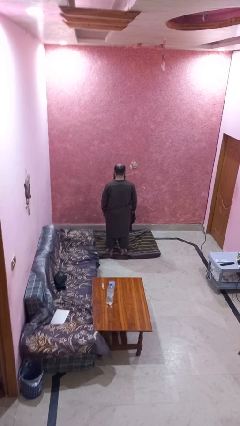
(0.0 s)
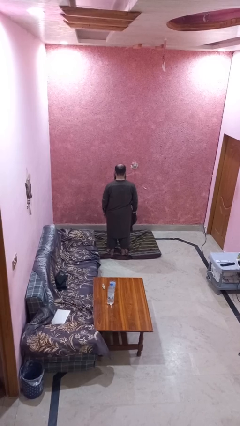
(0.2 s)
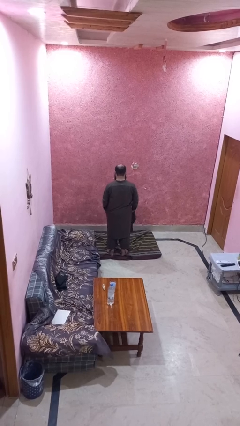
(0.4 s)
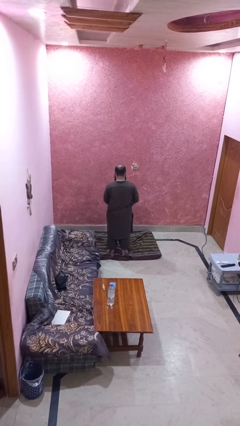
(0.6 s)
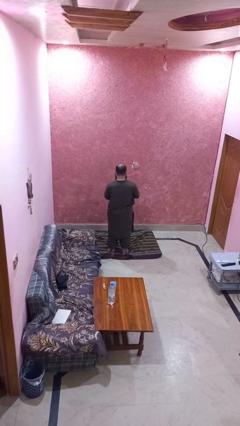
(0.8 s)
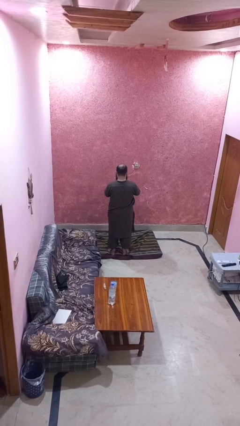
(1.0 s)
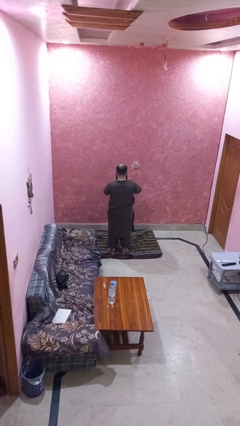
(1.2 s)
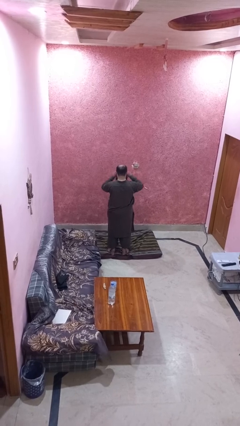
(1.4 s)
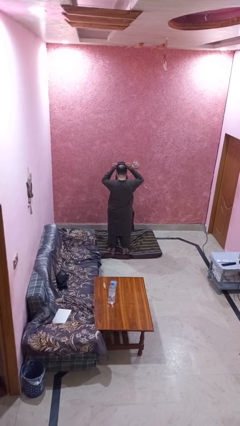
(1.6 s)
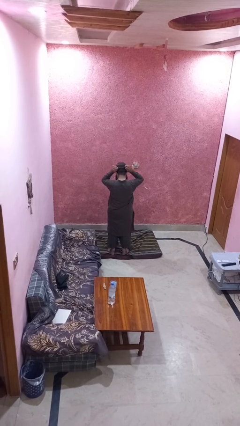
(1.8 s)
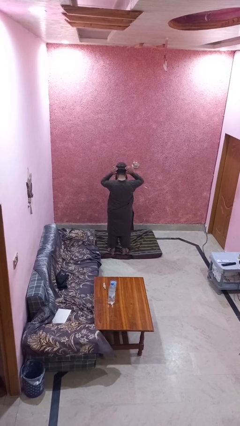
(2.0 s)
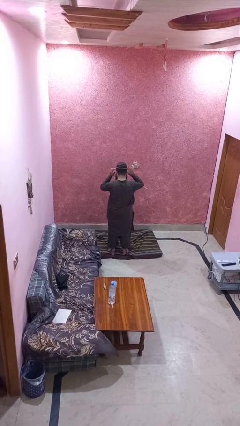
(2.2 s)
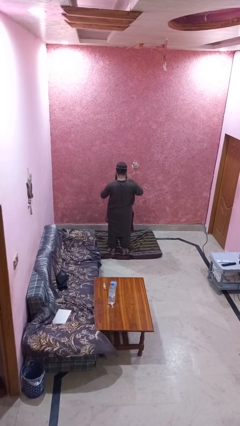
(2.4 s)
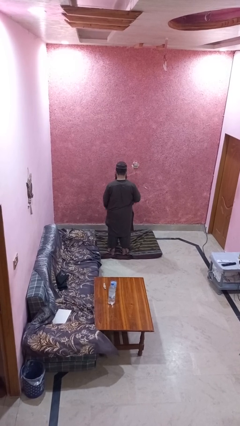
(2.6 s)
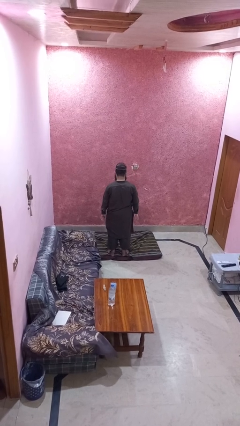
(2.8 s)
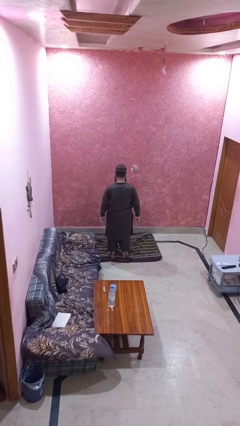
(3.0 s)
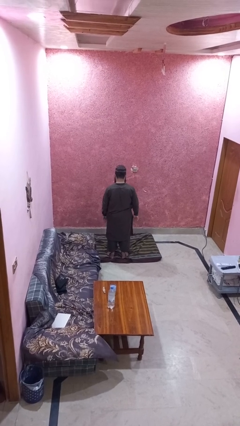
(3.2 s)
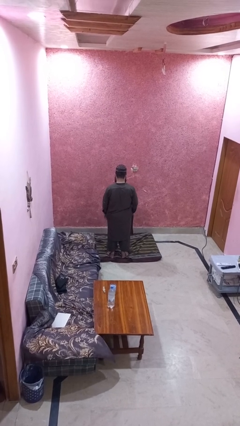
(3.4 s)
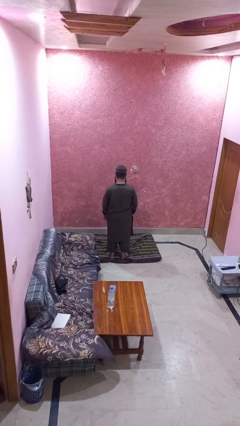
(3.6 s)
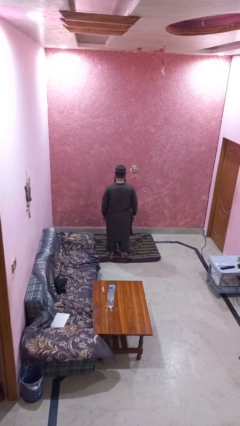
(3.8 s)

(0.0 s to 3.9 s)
person puts on hat

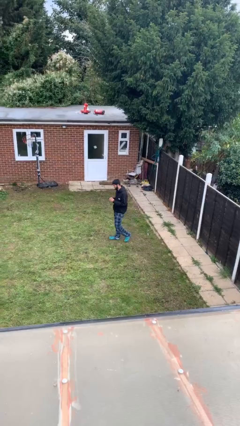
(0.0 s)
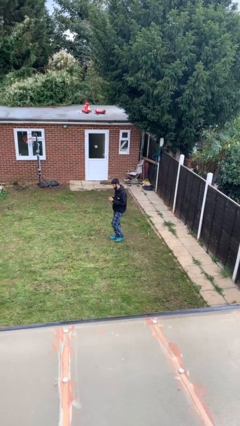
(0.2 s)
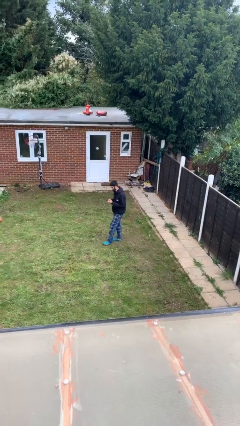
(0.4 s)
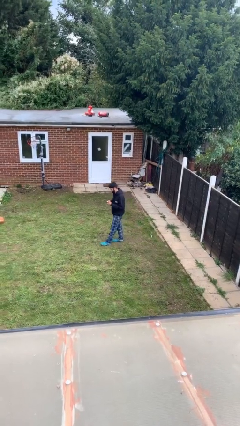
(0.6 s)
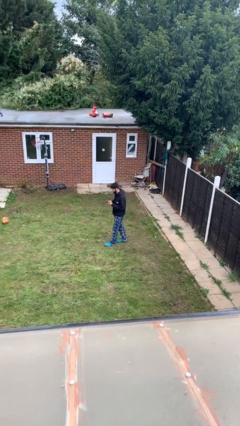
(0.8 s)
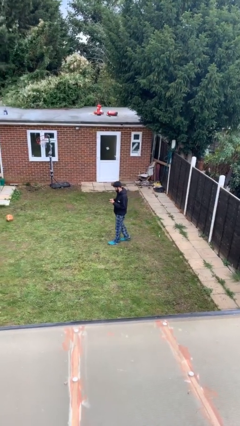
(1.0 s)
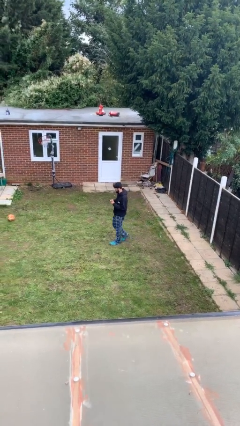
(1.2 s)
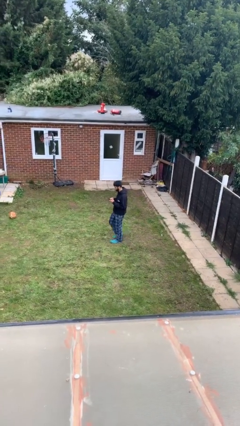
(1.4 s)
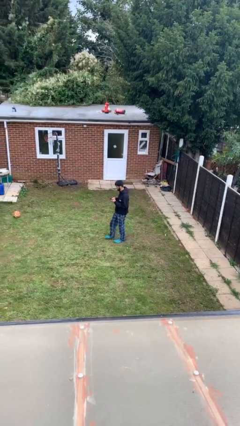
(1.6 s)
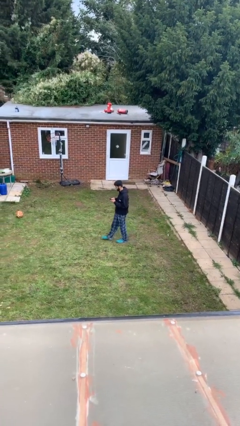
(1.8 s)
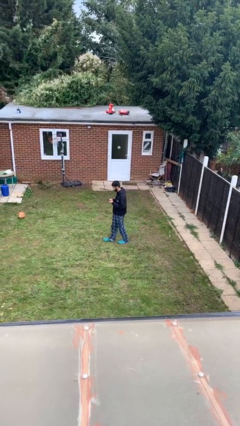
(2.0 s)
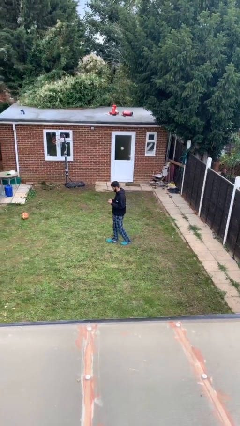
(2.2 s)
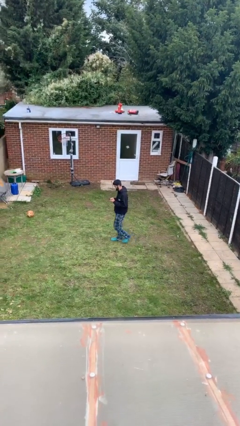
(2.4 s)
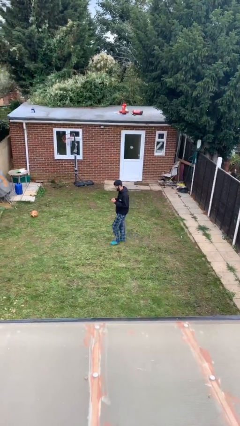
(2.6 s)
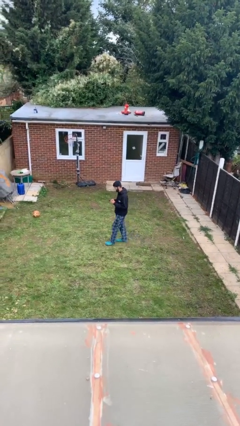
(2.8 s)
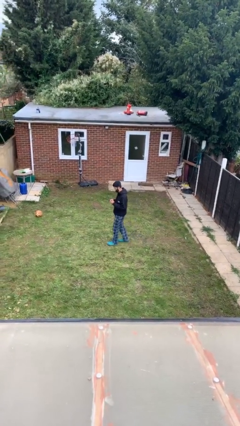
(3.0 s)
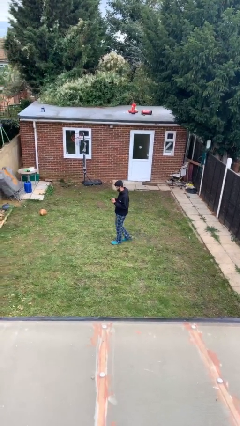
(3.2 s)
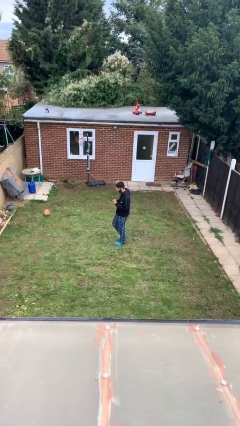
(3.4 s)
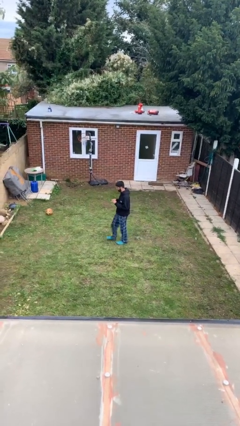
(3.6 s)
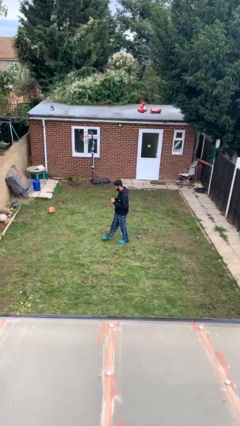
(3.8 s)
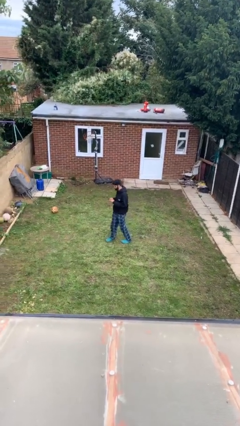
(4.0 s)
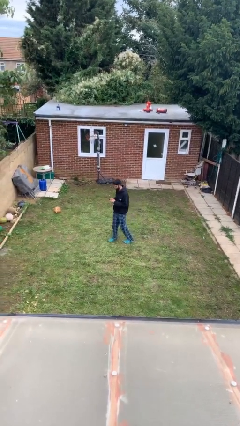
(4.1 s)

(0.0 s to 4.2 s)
person texts on phone

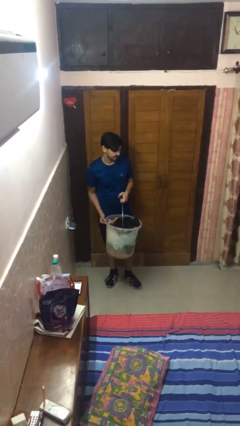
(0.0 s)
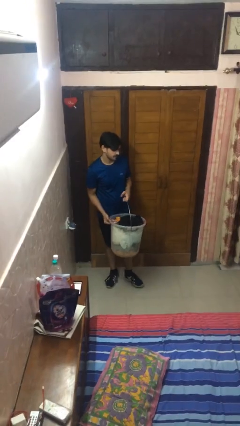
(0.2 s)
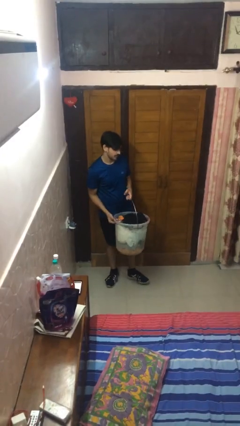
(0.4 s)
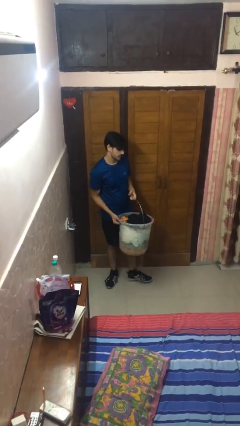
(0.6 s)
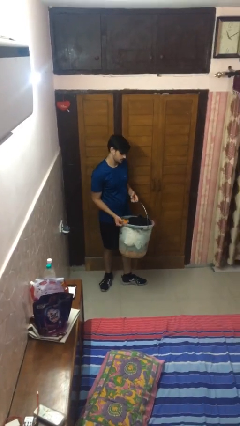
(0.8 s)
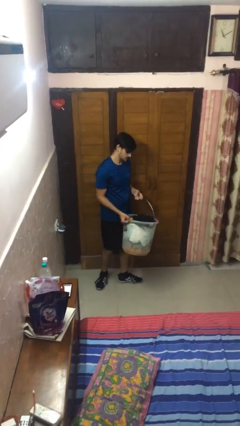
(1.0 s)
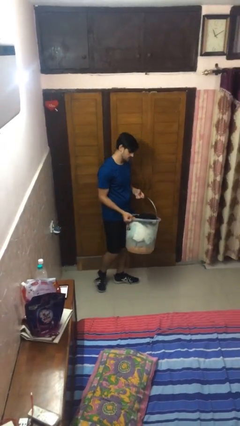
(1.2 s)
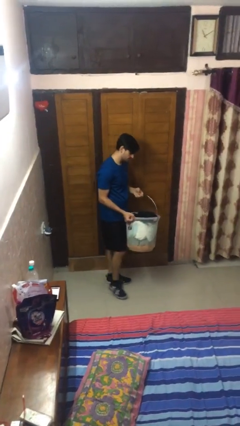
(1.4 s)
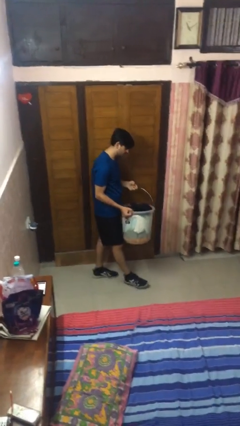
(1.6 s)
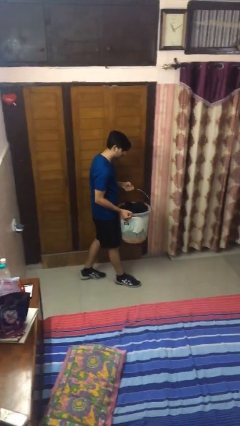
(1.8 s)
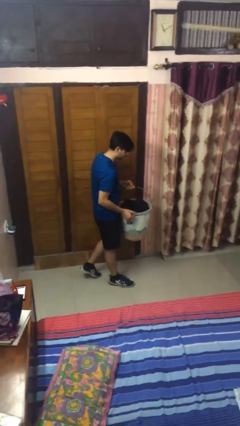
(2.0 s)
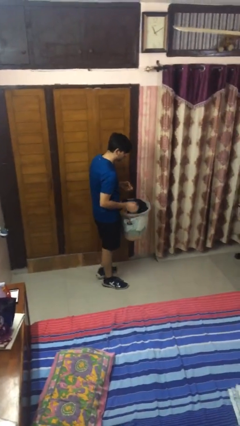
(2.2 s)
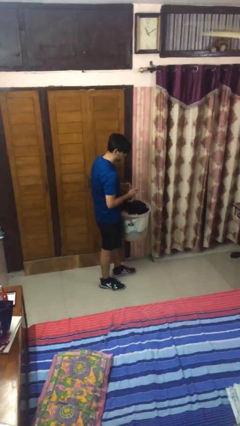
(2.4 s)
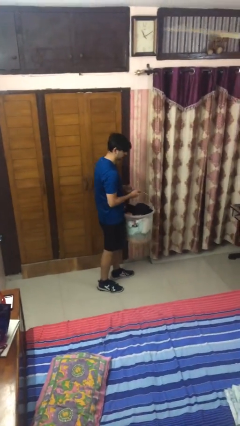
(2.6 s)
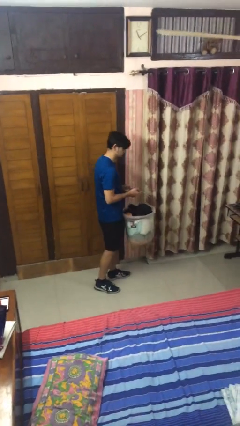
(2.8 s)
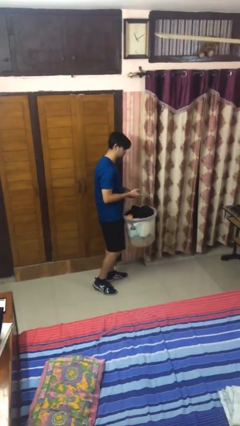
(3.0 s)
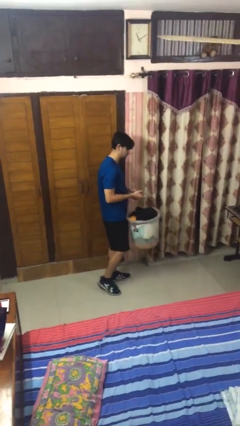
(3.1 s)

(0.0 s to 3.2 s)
person carries laundry basket

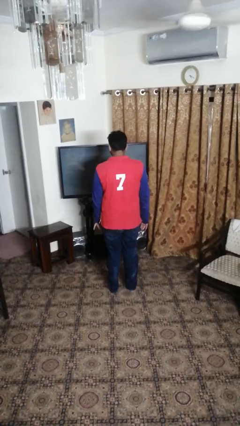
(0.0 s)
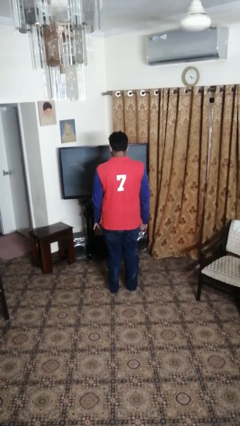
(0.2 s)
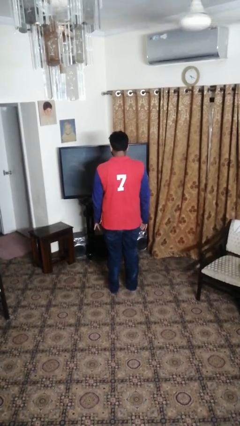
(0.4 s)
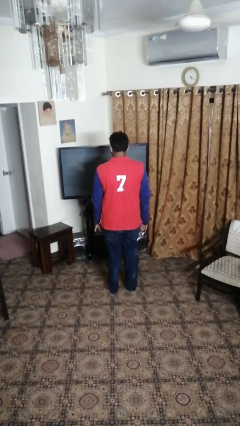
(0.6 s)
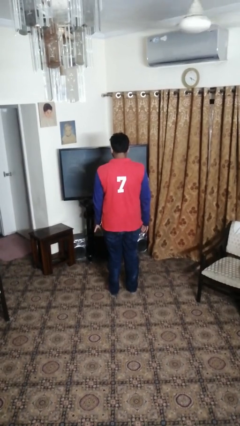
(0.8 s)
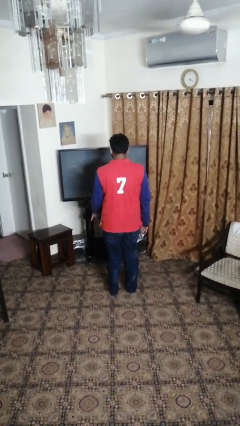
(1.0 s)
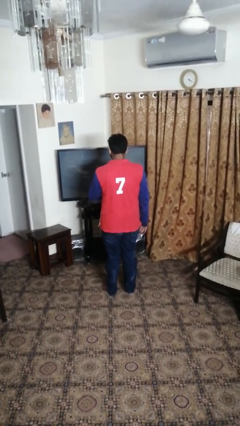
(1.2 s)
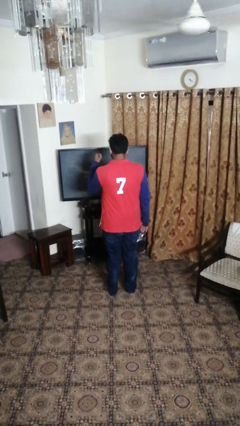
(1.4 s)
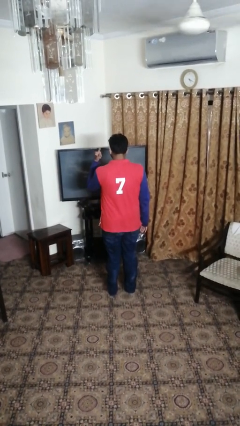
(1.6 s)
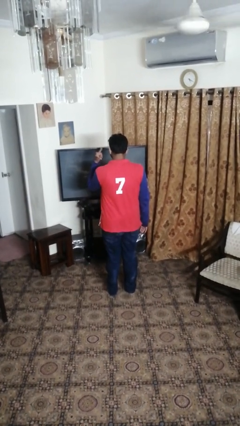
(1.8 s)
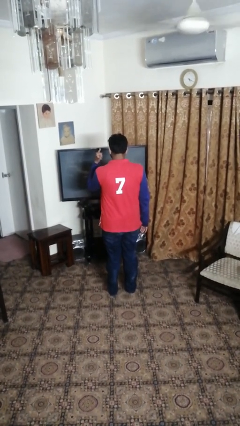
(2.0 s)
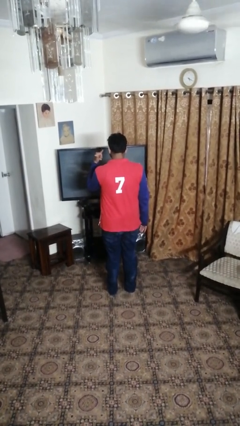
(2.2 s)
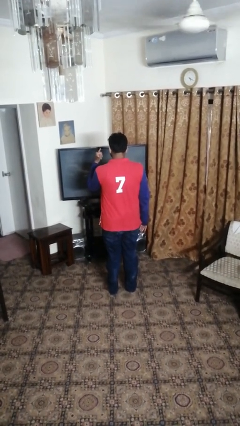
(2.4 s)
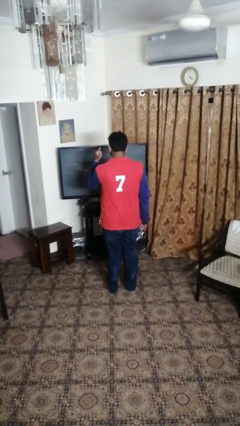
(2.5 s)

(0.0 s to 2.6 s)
person gestures hang loose

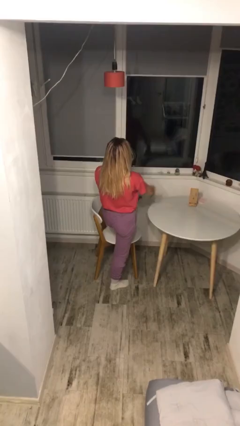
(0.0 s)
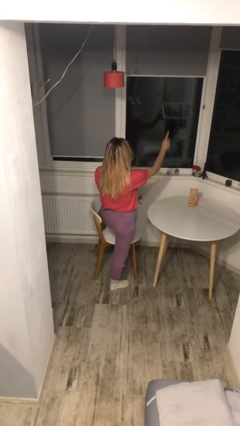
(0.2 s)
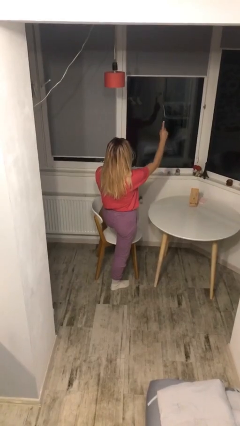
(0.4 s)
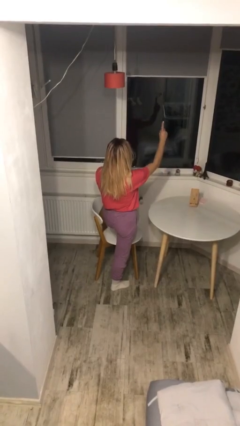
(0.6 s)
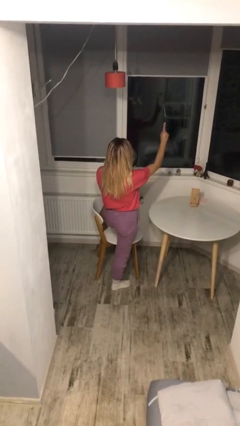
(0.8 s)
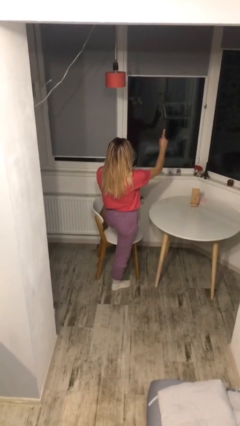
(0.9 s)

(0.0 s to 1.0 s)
person gestures number one

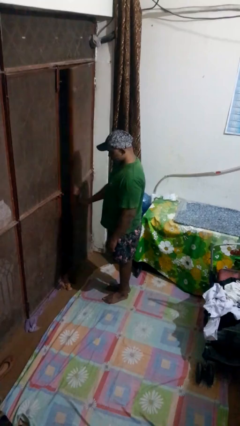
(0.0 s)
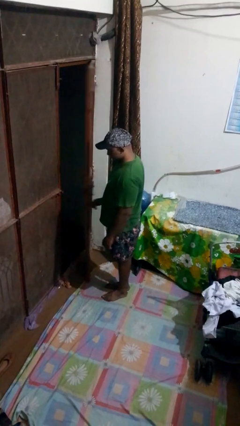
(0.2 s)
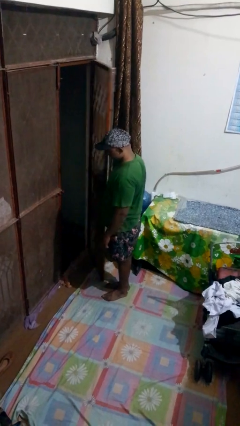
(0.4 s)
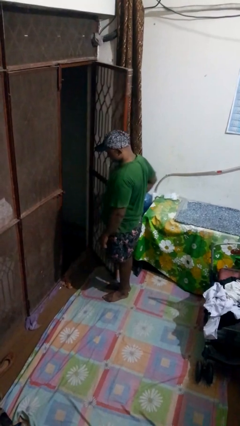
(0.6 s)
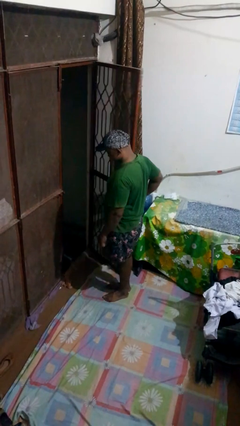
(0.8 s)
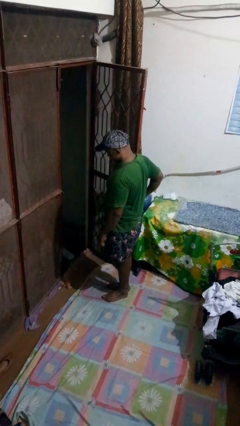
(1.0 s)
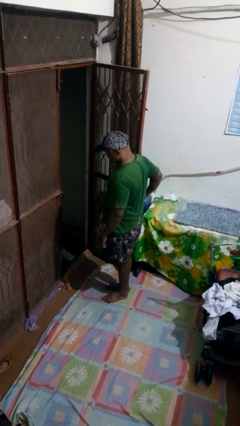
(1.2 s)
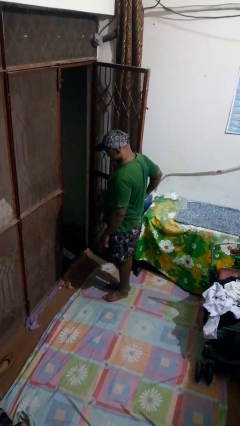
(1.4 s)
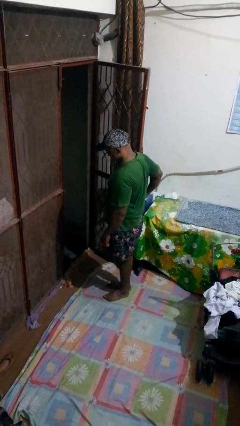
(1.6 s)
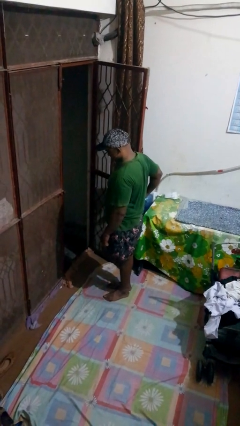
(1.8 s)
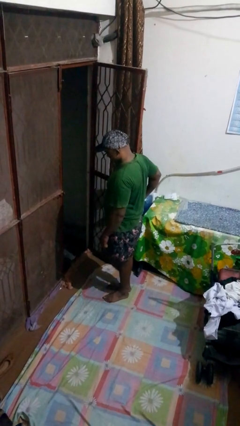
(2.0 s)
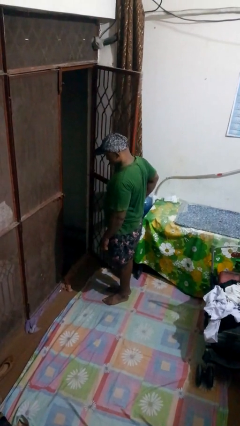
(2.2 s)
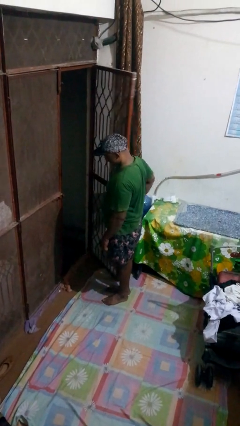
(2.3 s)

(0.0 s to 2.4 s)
person opens gate
